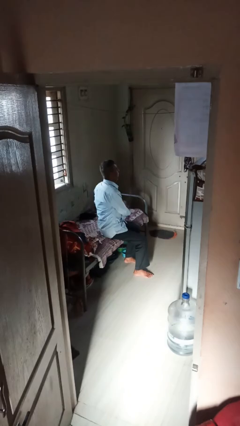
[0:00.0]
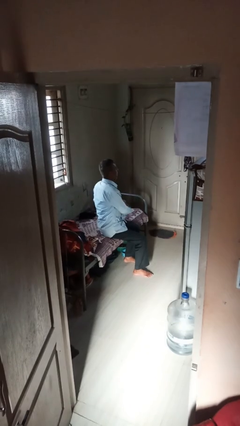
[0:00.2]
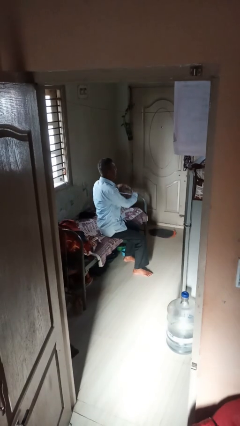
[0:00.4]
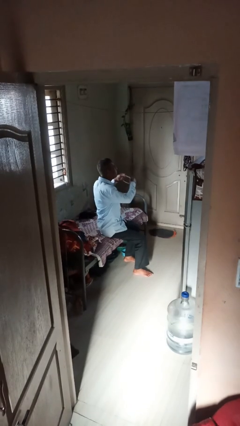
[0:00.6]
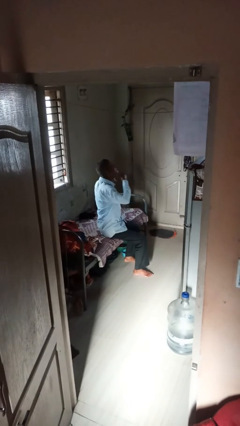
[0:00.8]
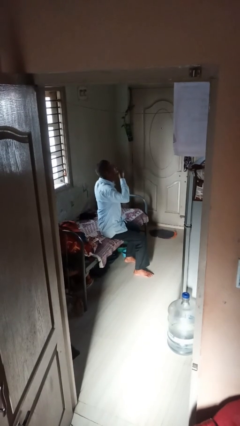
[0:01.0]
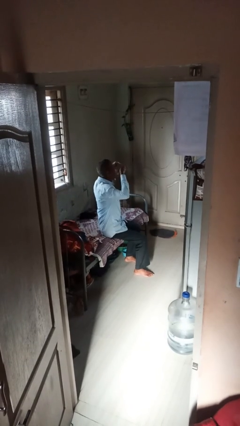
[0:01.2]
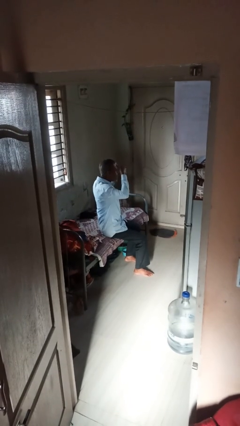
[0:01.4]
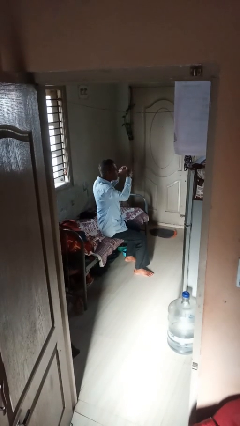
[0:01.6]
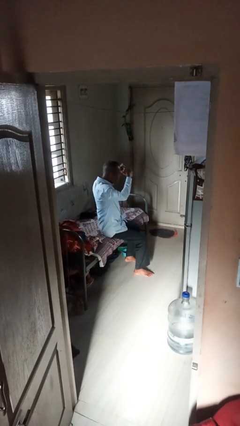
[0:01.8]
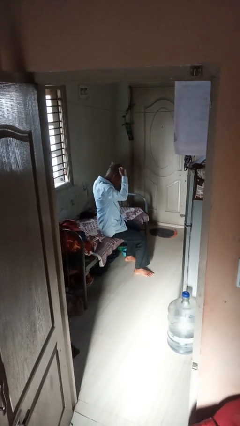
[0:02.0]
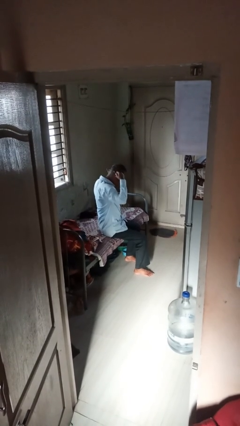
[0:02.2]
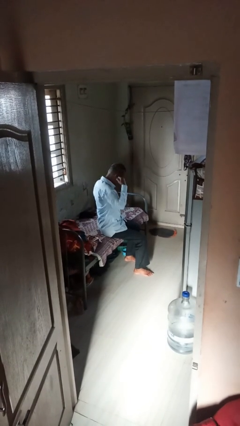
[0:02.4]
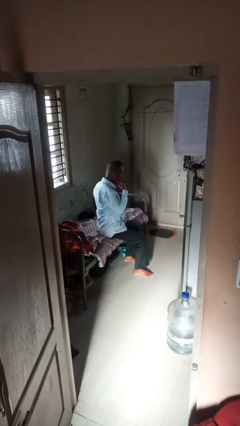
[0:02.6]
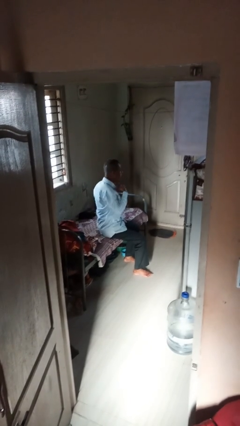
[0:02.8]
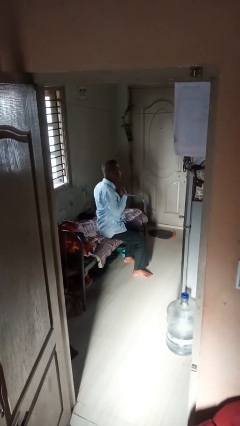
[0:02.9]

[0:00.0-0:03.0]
person puts on necklace

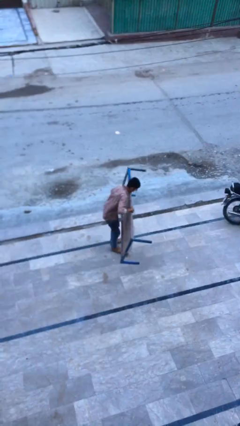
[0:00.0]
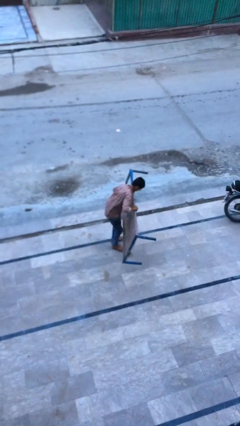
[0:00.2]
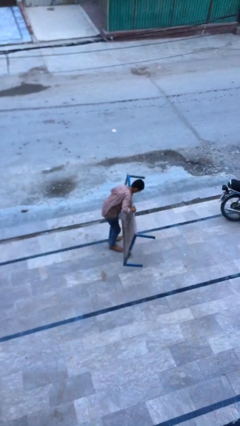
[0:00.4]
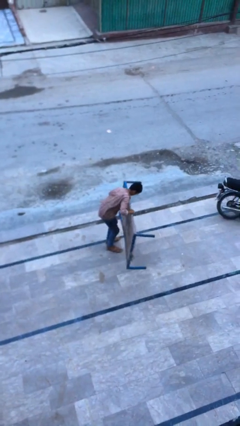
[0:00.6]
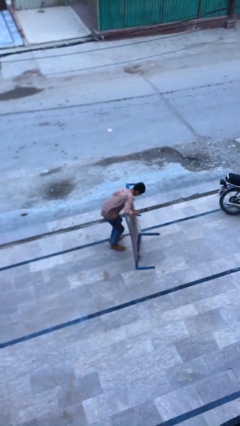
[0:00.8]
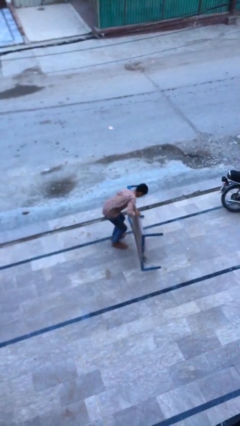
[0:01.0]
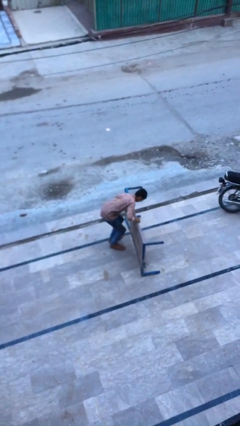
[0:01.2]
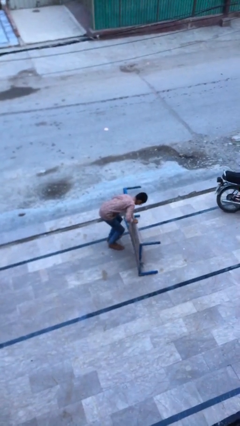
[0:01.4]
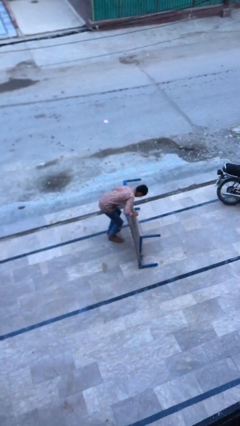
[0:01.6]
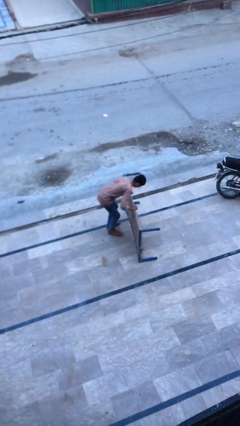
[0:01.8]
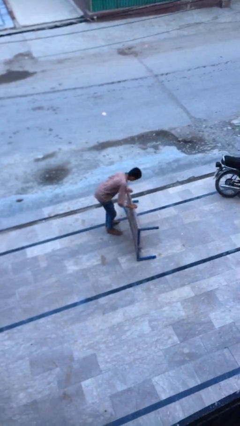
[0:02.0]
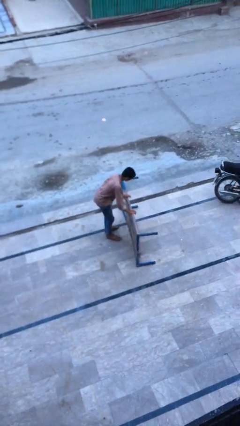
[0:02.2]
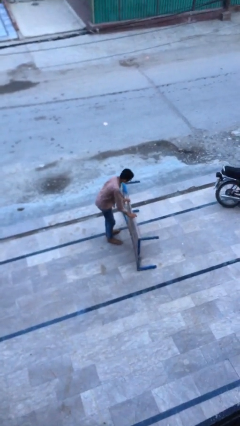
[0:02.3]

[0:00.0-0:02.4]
person puts down object on floor

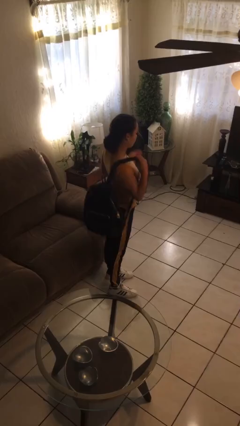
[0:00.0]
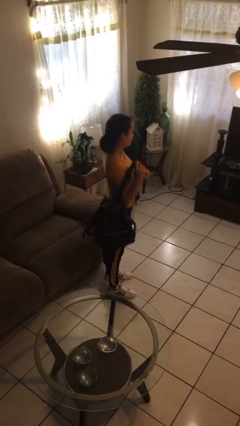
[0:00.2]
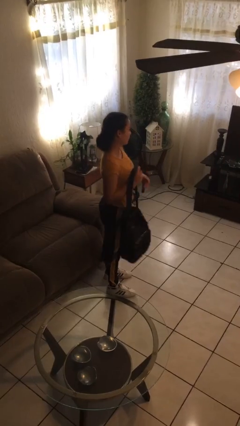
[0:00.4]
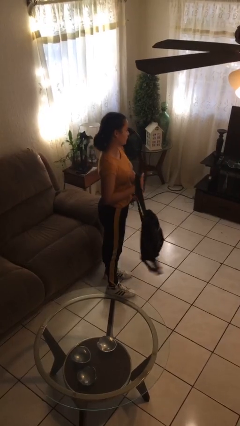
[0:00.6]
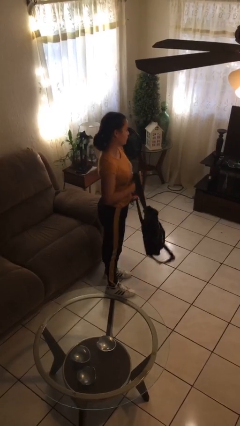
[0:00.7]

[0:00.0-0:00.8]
person takes off backpack

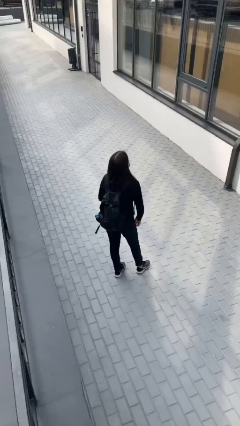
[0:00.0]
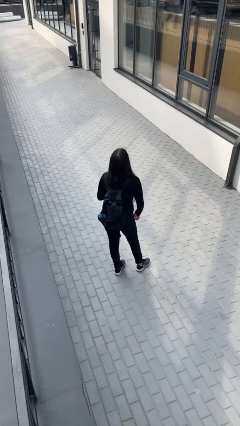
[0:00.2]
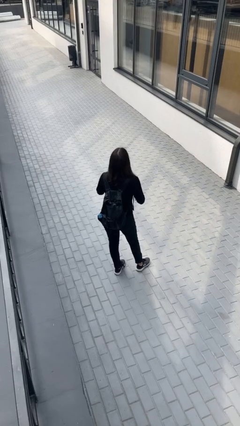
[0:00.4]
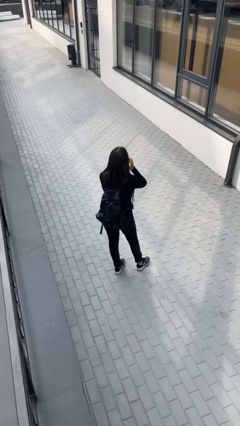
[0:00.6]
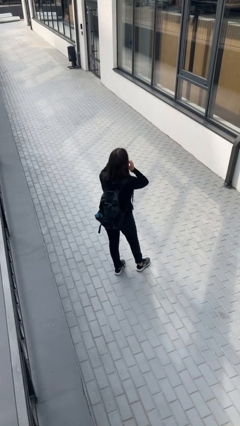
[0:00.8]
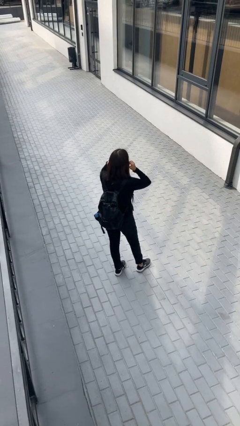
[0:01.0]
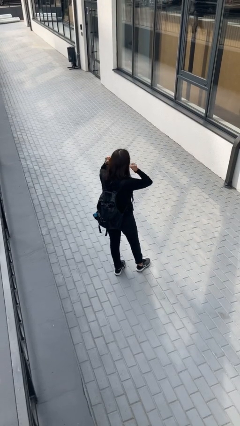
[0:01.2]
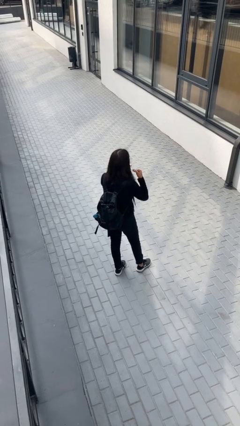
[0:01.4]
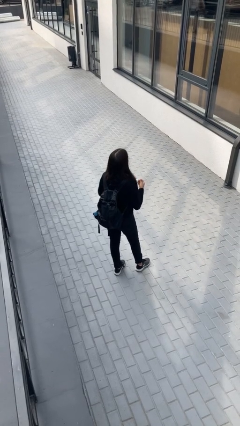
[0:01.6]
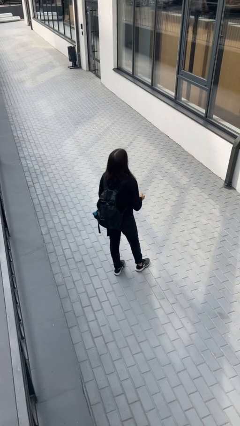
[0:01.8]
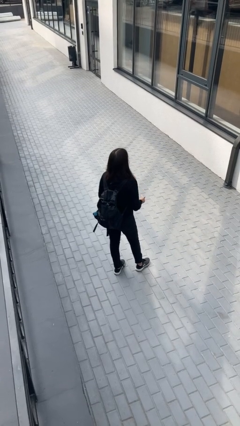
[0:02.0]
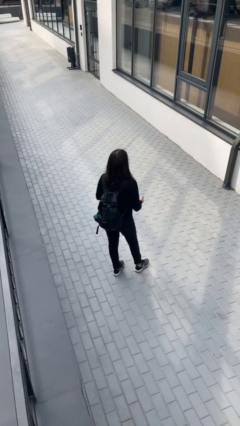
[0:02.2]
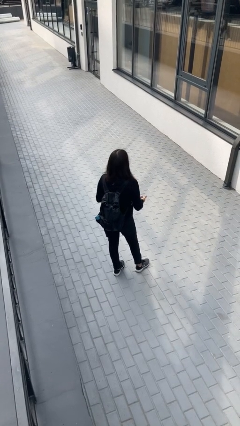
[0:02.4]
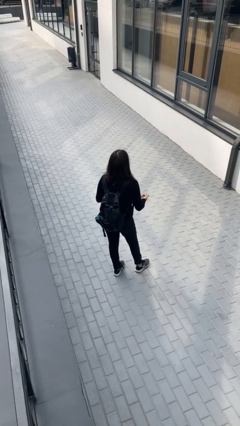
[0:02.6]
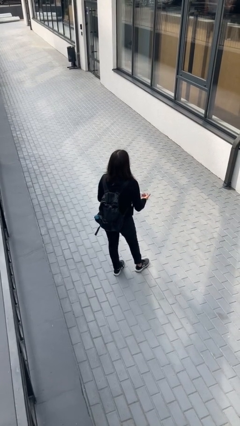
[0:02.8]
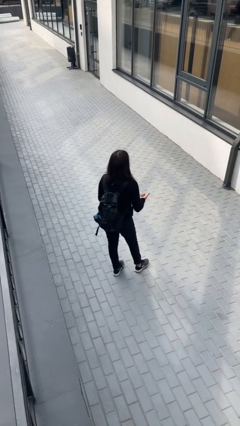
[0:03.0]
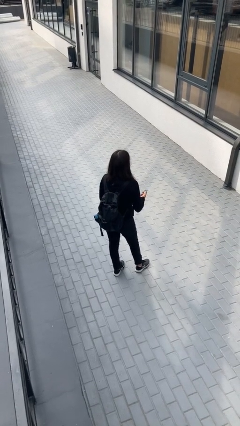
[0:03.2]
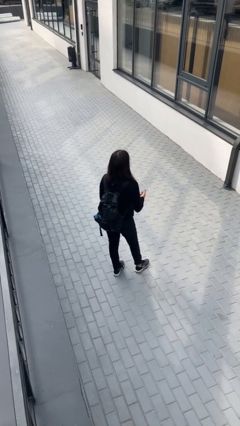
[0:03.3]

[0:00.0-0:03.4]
person puts on facemask

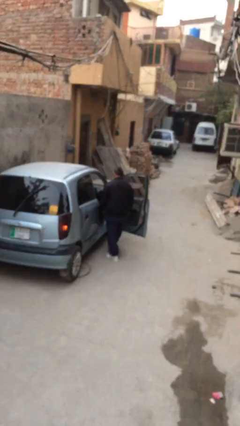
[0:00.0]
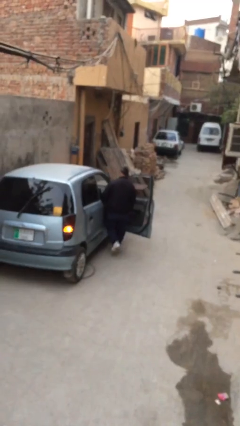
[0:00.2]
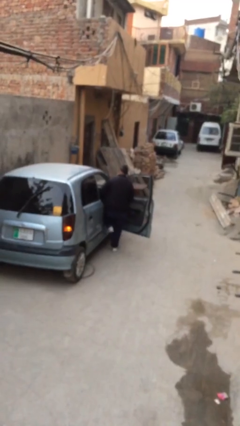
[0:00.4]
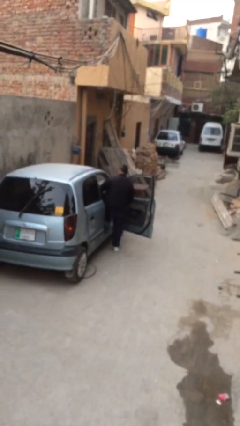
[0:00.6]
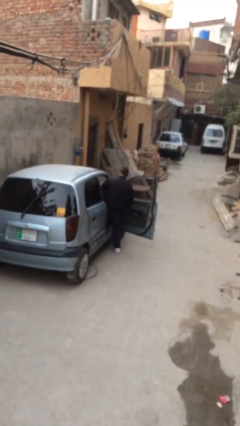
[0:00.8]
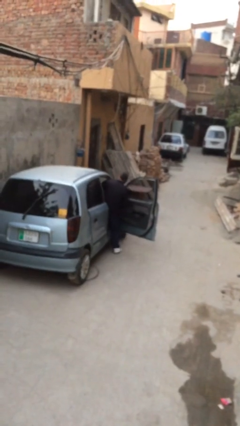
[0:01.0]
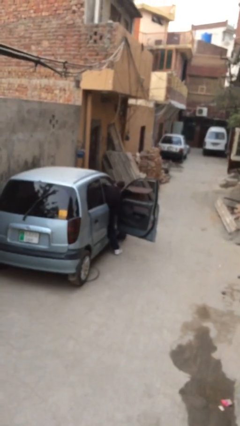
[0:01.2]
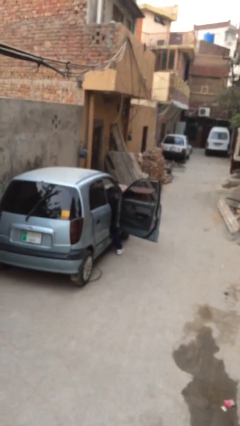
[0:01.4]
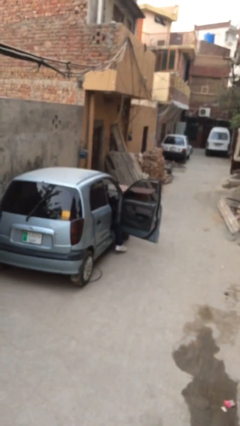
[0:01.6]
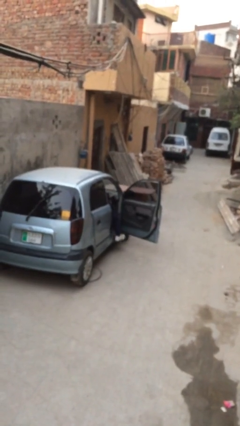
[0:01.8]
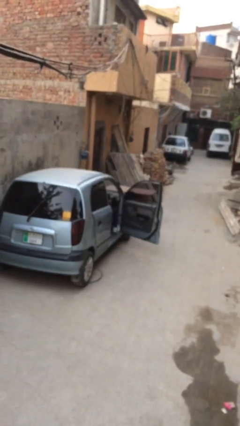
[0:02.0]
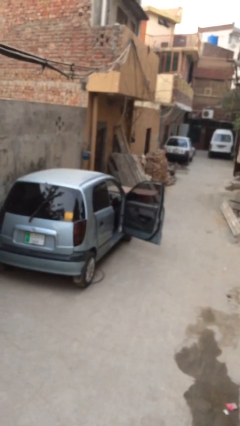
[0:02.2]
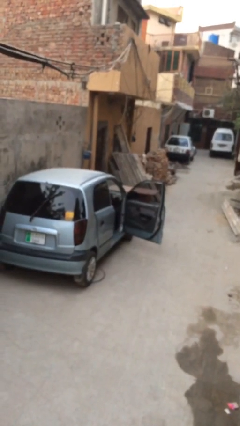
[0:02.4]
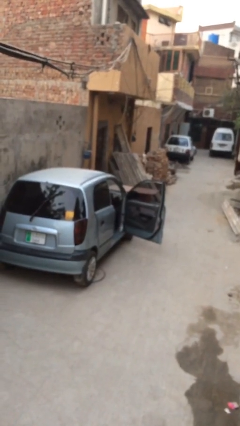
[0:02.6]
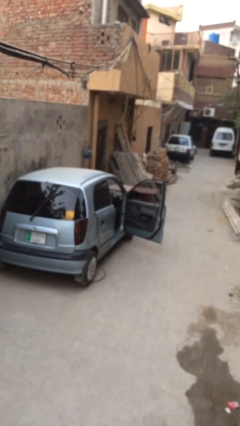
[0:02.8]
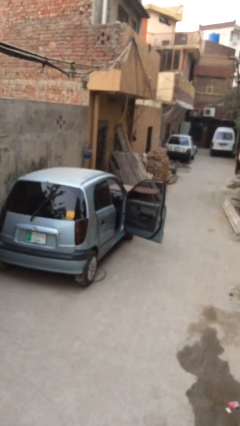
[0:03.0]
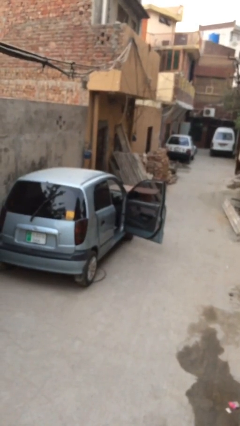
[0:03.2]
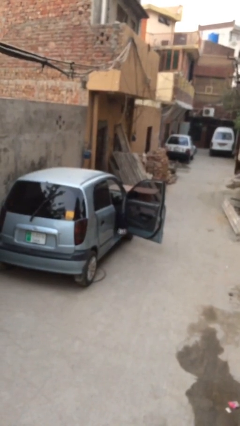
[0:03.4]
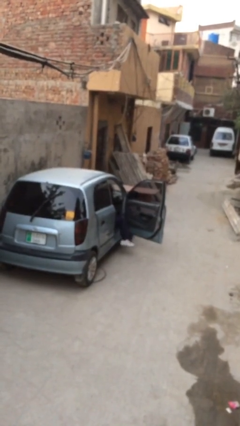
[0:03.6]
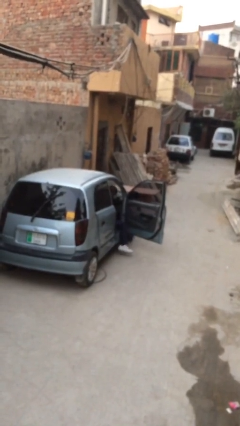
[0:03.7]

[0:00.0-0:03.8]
person enters car

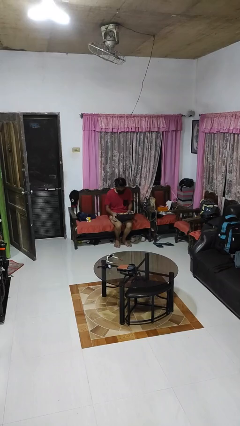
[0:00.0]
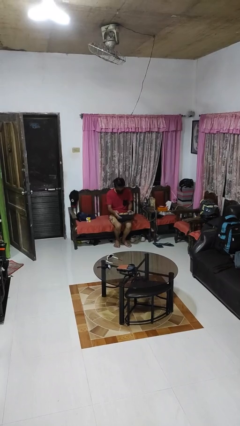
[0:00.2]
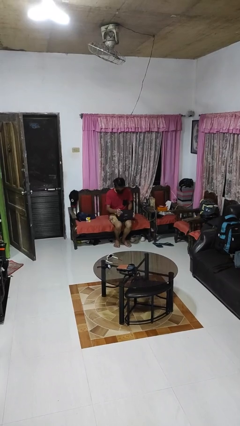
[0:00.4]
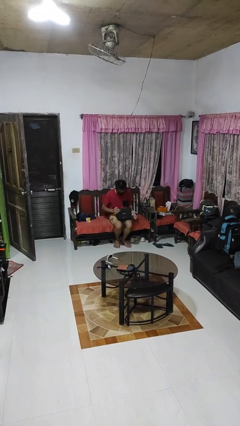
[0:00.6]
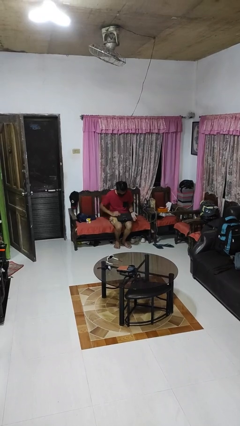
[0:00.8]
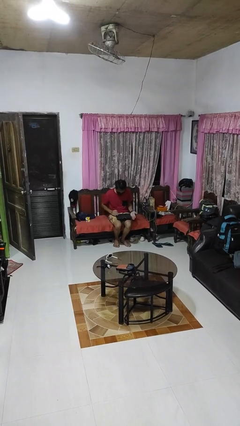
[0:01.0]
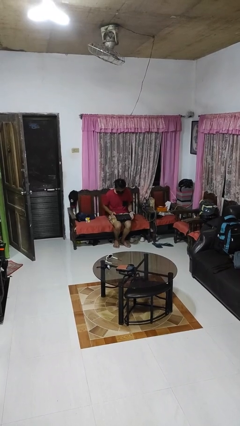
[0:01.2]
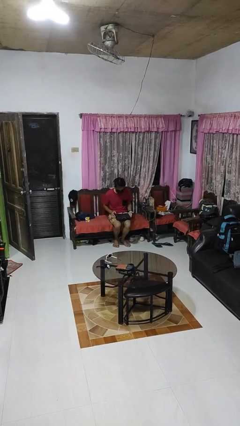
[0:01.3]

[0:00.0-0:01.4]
person closes laptop

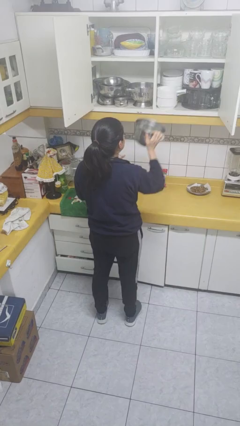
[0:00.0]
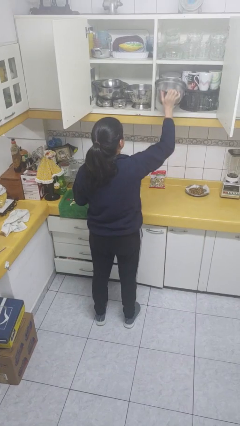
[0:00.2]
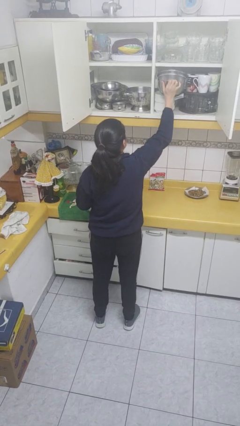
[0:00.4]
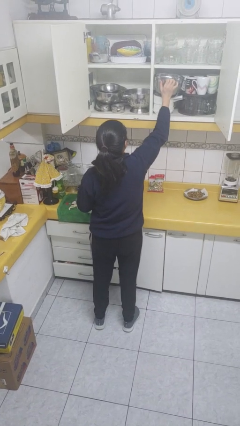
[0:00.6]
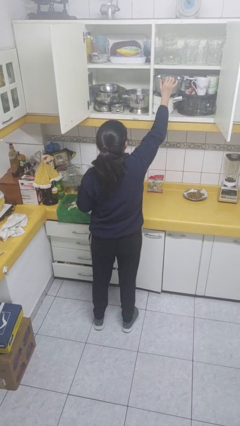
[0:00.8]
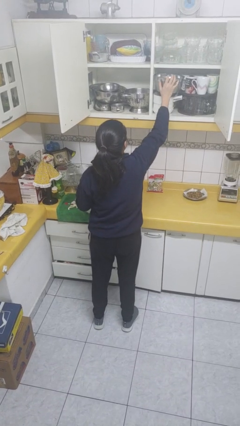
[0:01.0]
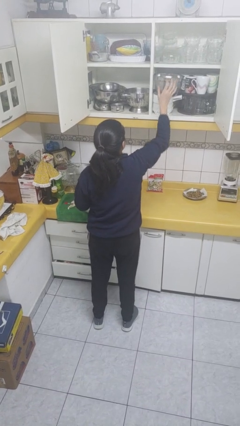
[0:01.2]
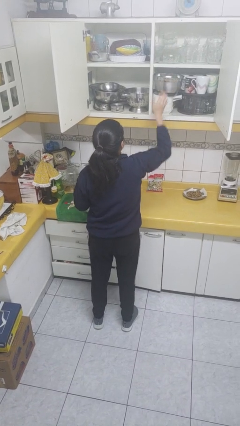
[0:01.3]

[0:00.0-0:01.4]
person puts down object into cabinet

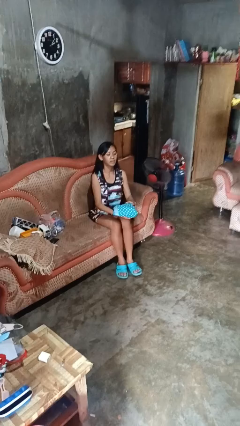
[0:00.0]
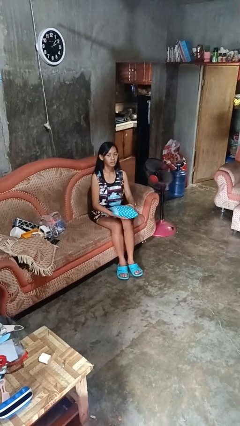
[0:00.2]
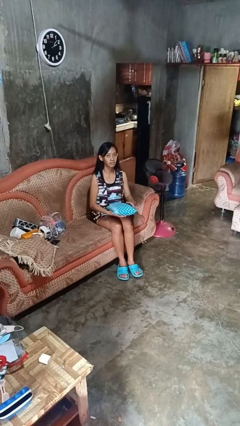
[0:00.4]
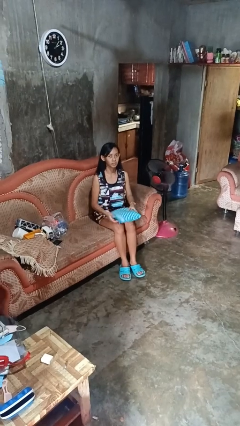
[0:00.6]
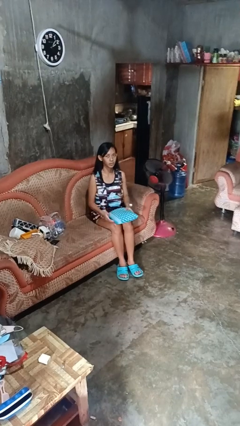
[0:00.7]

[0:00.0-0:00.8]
person catches dropped object
